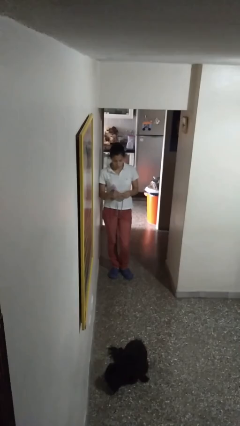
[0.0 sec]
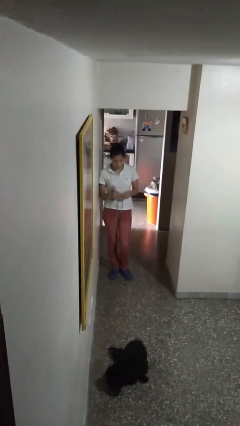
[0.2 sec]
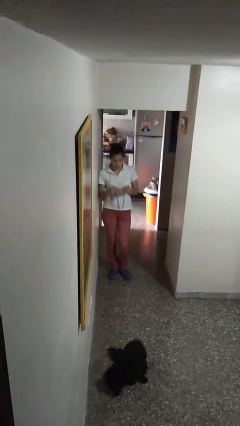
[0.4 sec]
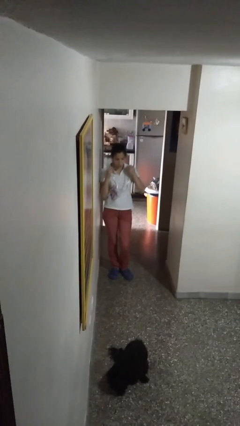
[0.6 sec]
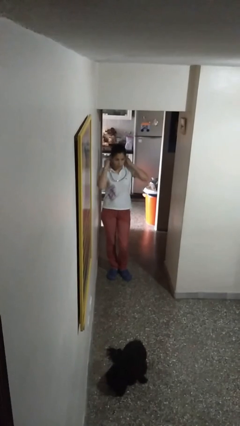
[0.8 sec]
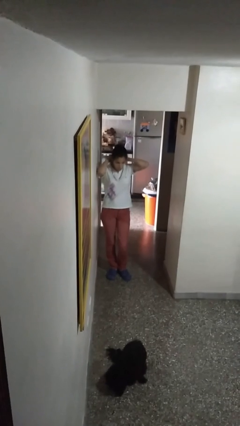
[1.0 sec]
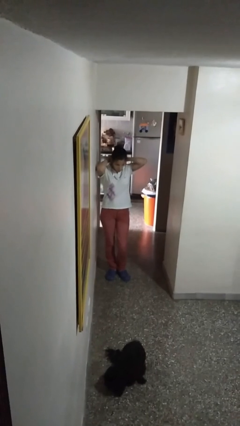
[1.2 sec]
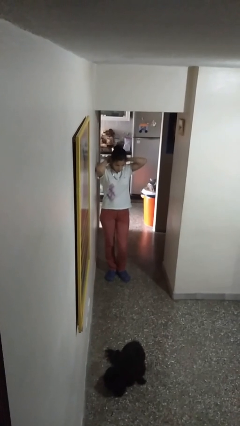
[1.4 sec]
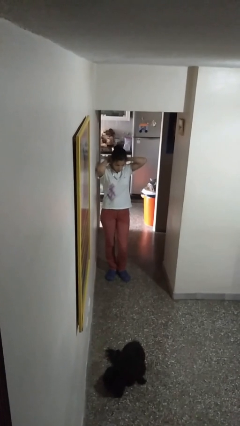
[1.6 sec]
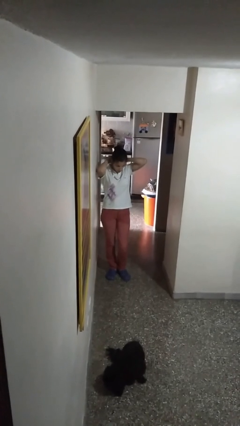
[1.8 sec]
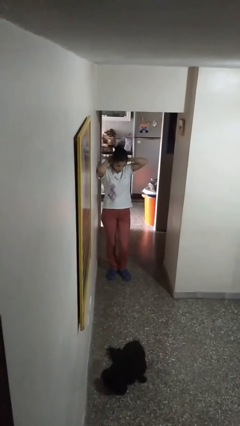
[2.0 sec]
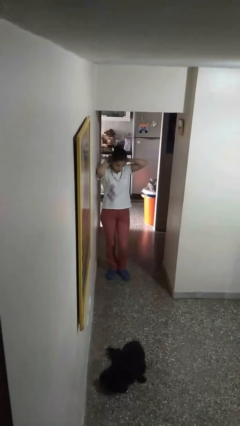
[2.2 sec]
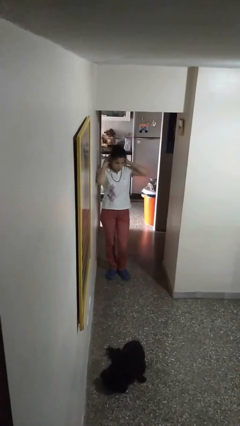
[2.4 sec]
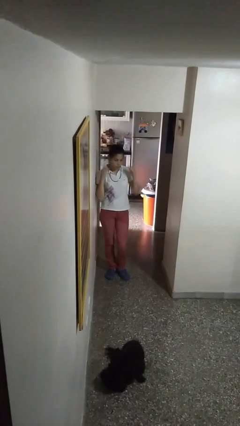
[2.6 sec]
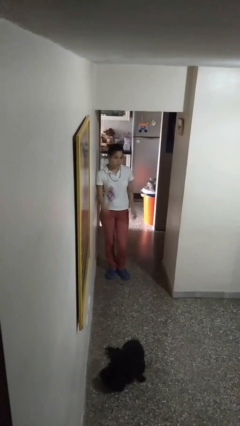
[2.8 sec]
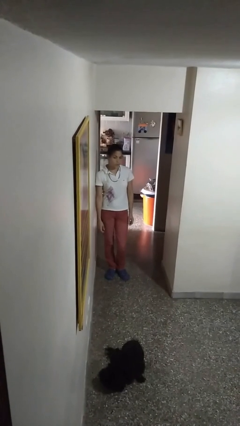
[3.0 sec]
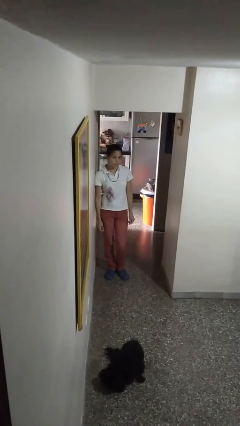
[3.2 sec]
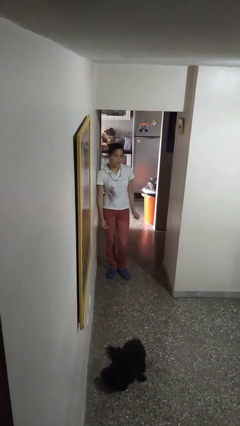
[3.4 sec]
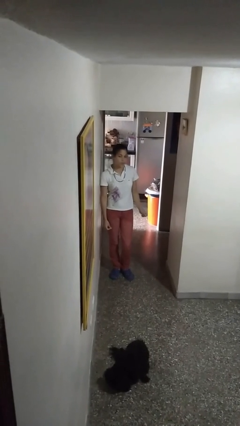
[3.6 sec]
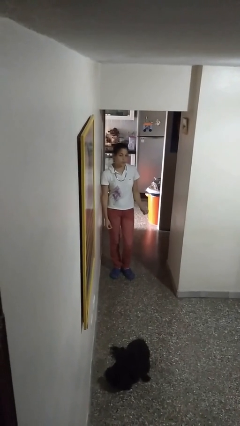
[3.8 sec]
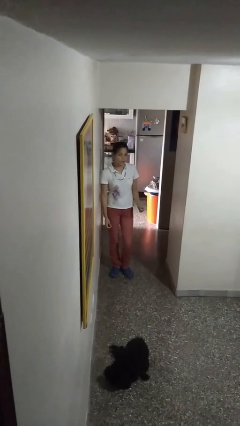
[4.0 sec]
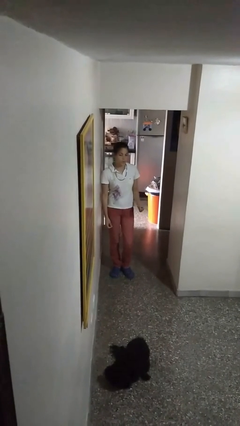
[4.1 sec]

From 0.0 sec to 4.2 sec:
person puts on necklace

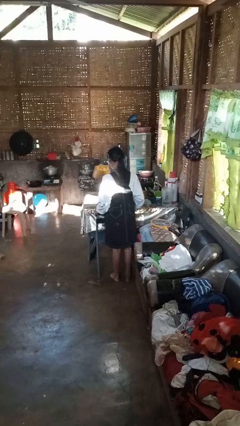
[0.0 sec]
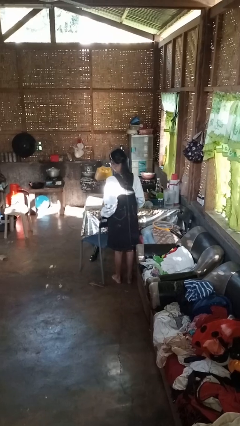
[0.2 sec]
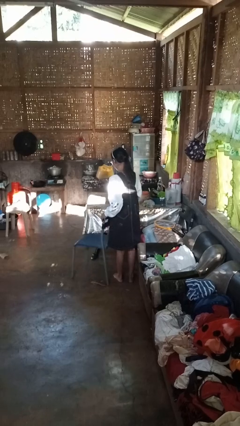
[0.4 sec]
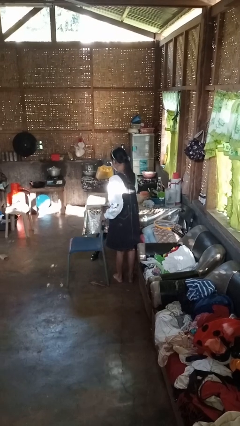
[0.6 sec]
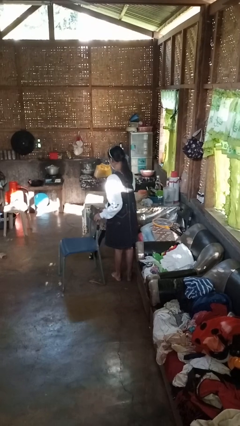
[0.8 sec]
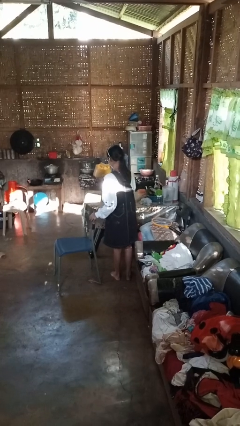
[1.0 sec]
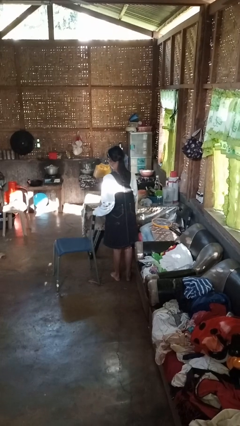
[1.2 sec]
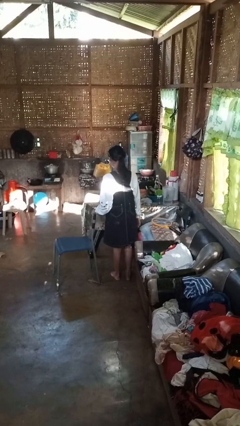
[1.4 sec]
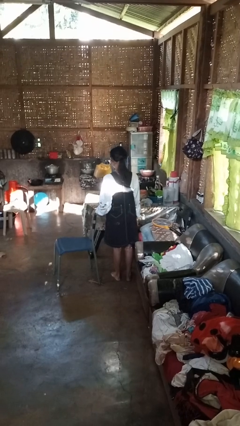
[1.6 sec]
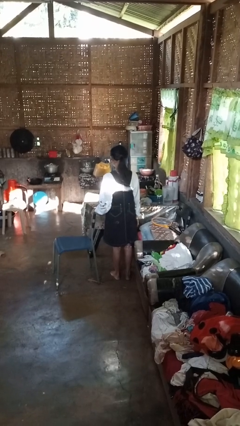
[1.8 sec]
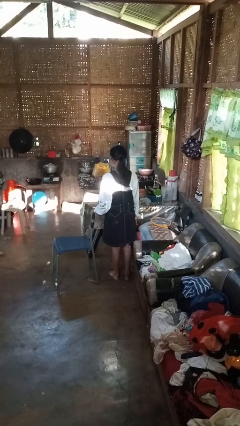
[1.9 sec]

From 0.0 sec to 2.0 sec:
person pulls out chair

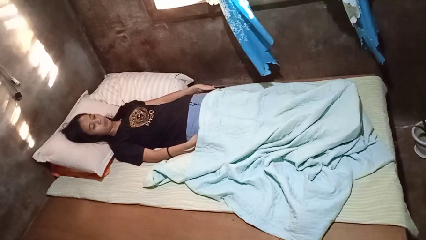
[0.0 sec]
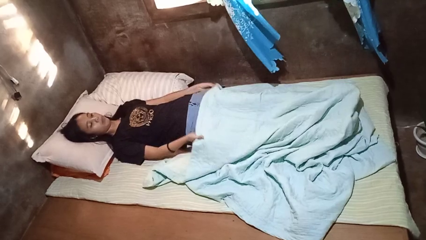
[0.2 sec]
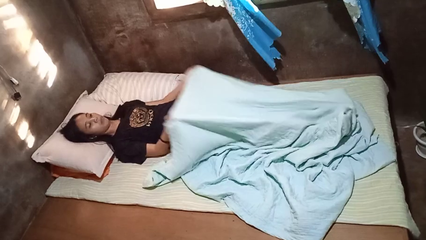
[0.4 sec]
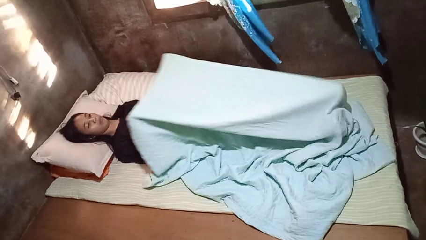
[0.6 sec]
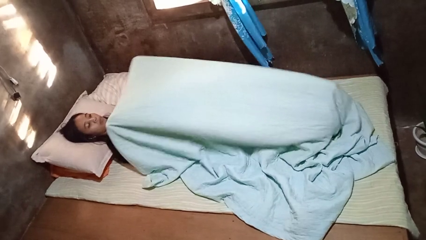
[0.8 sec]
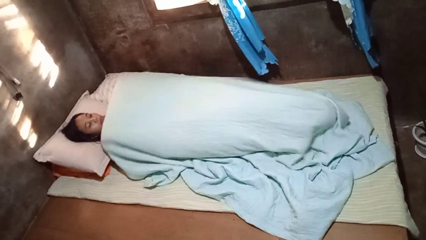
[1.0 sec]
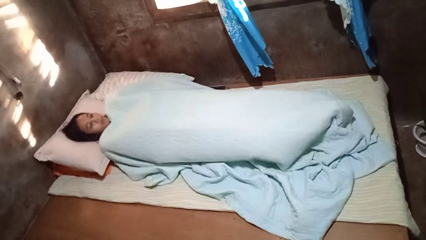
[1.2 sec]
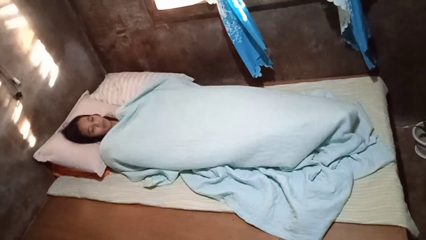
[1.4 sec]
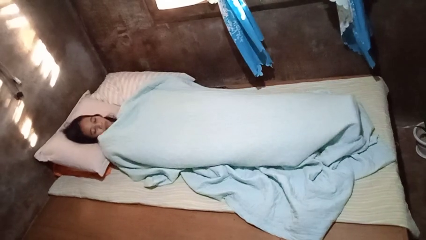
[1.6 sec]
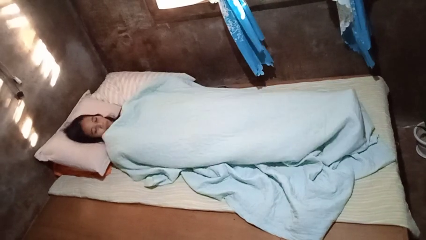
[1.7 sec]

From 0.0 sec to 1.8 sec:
person covers with bedsheets

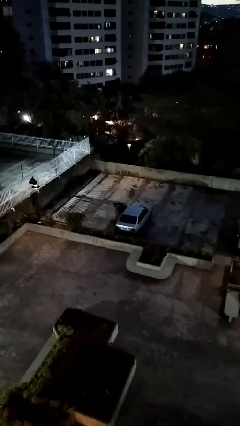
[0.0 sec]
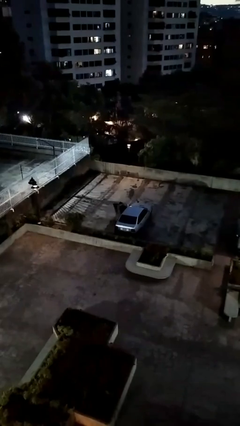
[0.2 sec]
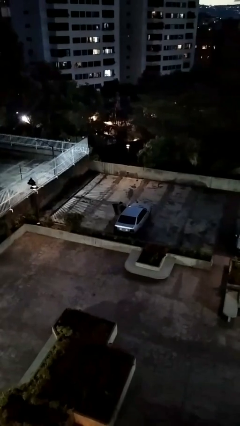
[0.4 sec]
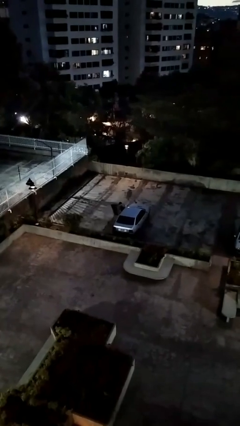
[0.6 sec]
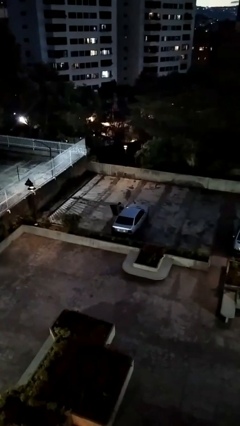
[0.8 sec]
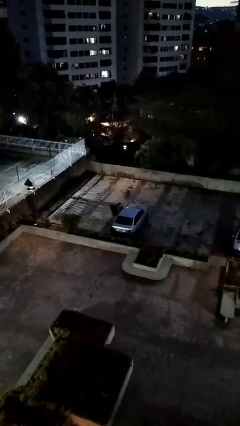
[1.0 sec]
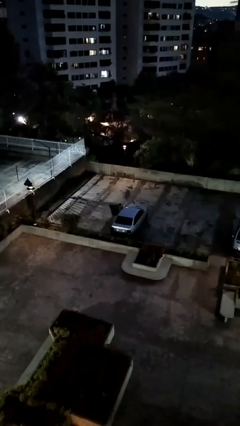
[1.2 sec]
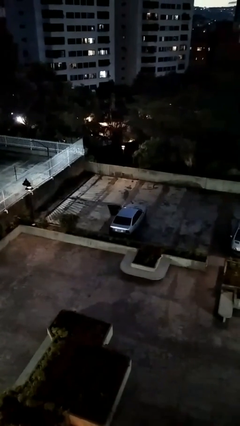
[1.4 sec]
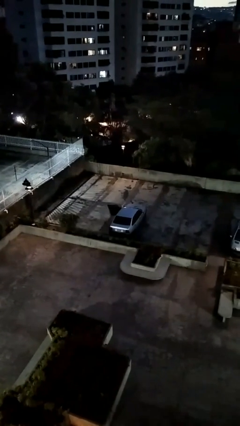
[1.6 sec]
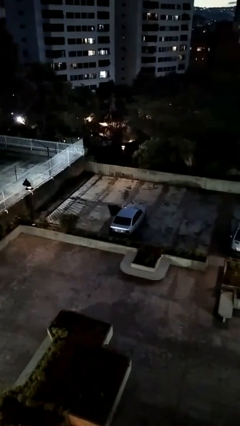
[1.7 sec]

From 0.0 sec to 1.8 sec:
person enters car

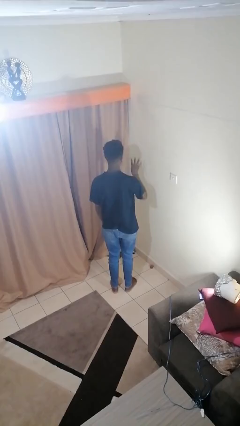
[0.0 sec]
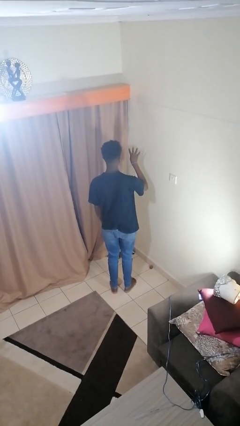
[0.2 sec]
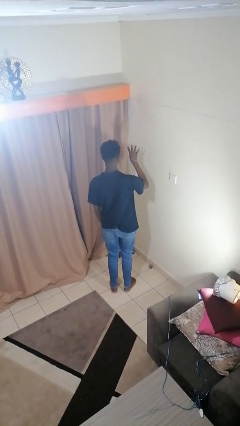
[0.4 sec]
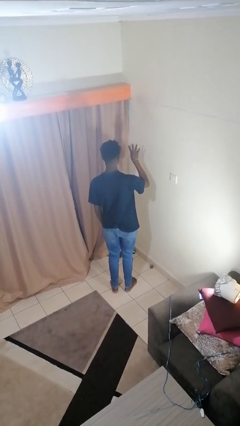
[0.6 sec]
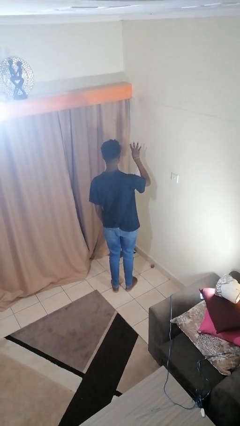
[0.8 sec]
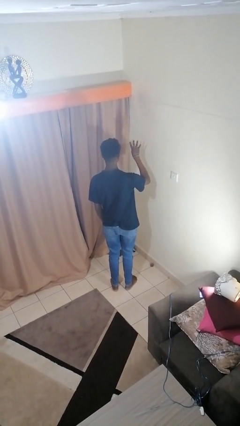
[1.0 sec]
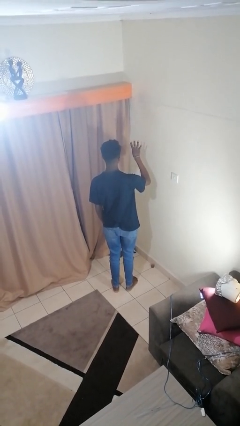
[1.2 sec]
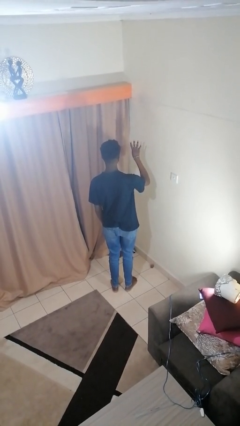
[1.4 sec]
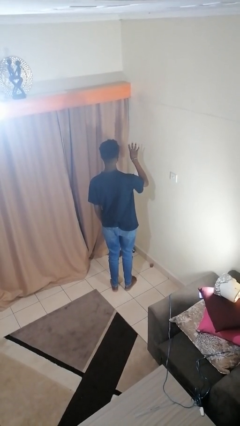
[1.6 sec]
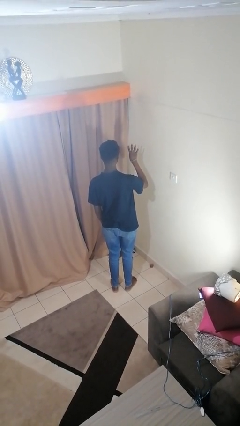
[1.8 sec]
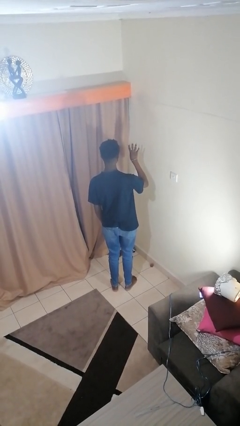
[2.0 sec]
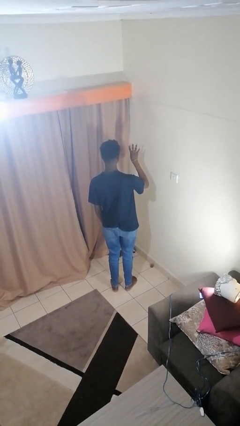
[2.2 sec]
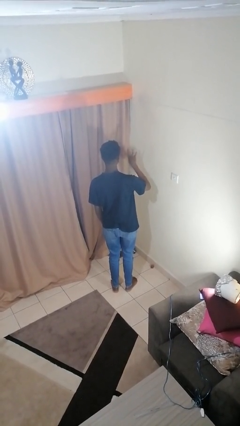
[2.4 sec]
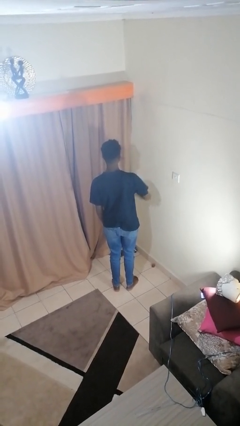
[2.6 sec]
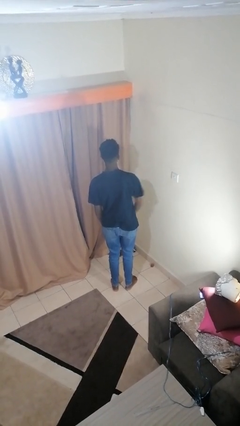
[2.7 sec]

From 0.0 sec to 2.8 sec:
person gestures number four

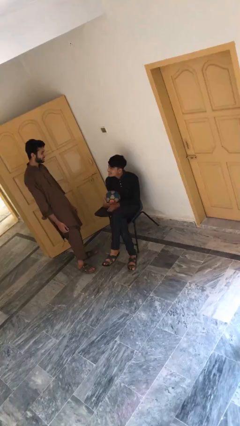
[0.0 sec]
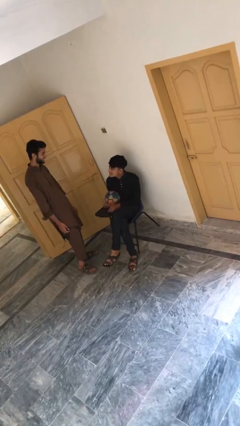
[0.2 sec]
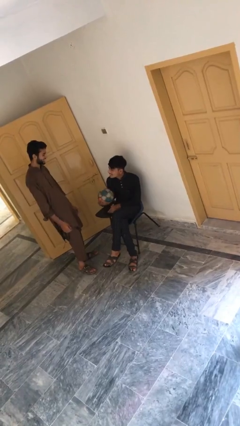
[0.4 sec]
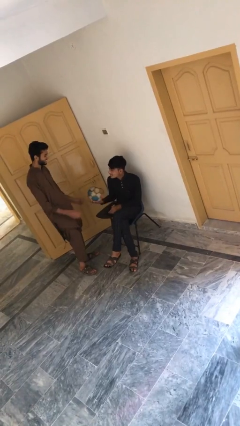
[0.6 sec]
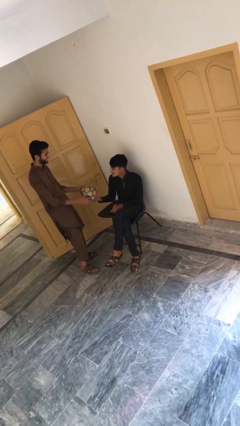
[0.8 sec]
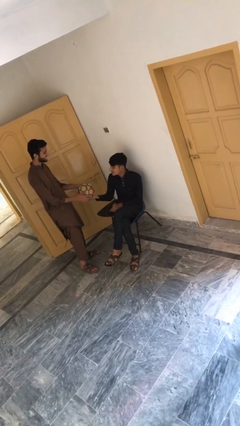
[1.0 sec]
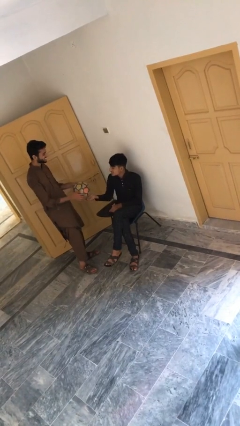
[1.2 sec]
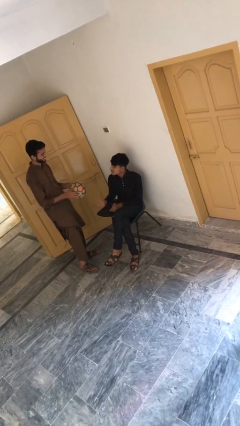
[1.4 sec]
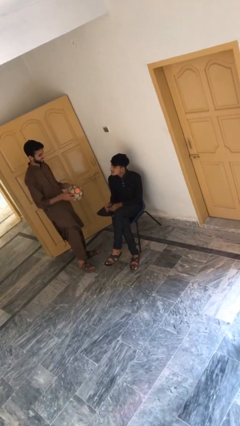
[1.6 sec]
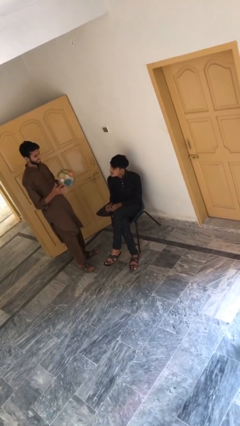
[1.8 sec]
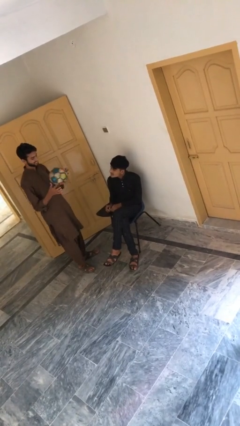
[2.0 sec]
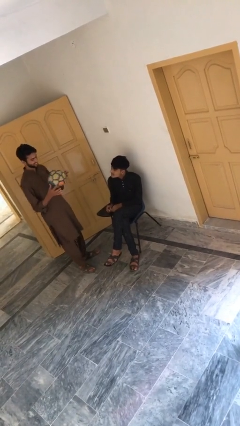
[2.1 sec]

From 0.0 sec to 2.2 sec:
person transfers object to person

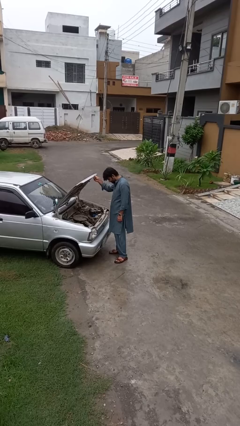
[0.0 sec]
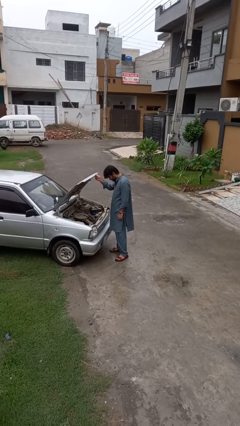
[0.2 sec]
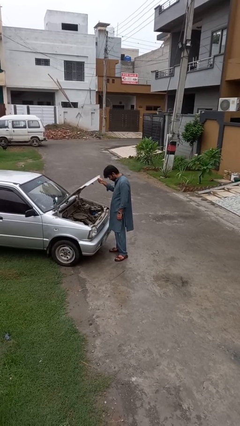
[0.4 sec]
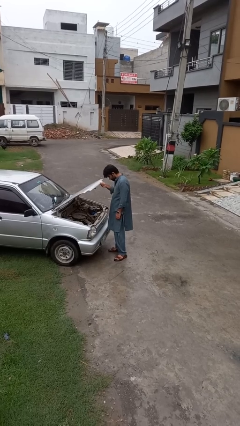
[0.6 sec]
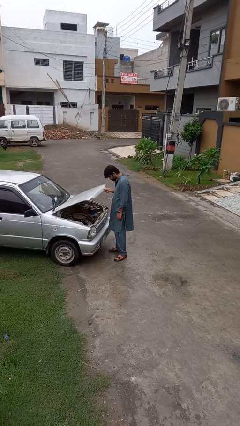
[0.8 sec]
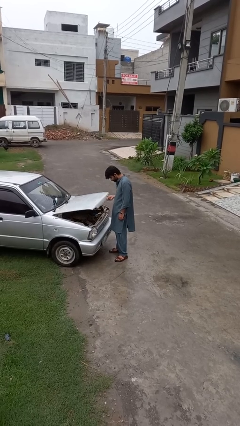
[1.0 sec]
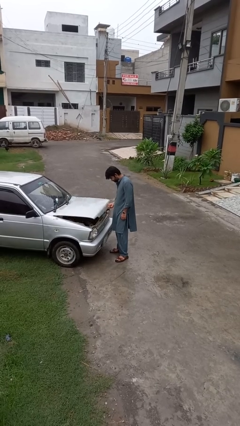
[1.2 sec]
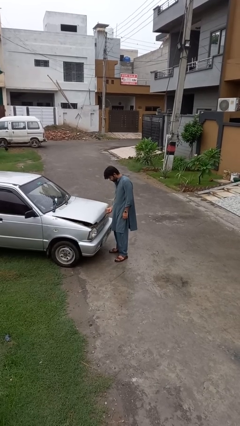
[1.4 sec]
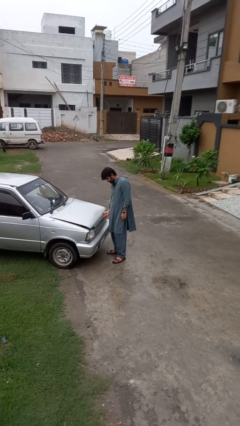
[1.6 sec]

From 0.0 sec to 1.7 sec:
person closes car hood

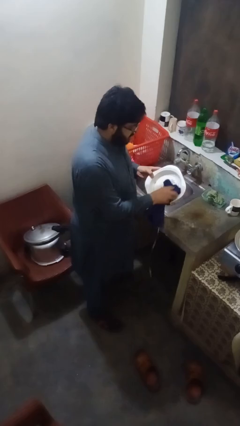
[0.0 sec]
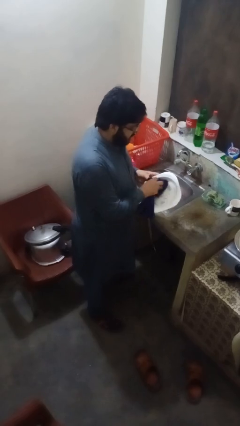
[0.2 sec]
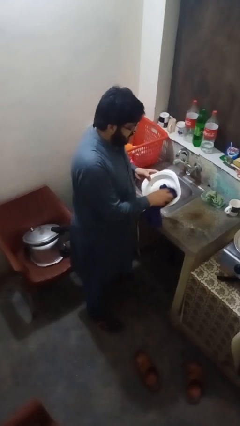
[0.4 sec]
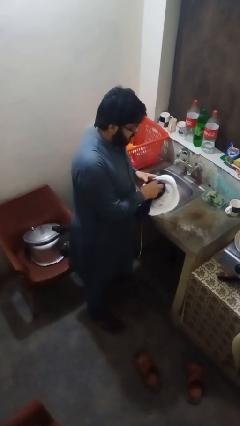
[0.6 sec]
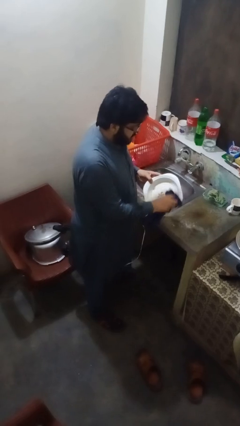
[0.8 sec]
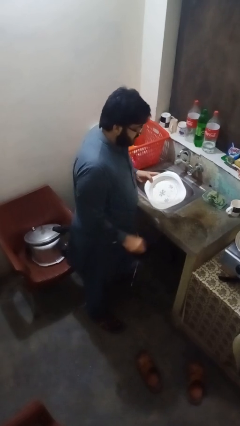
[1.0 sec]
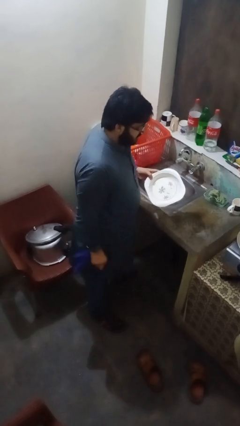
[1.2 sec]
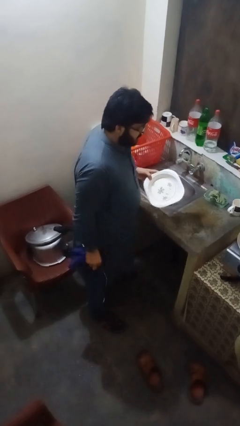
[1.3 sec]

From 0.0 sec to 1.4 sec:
person dries dish
